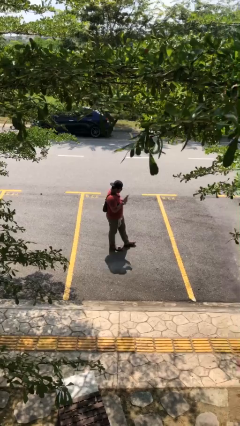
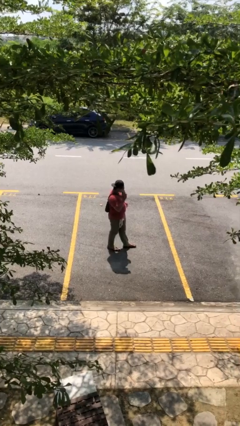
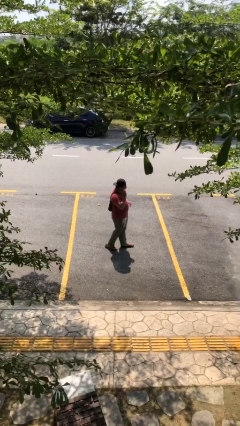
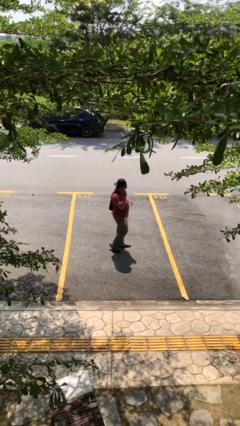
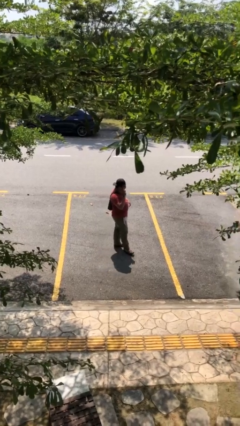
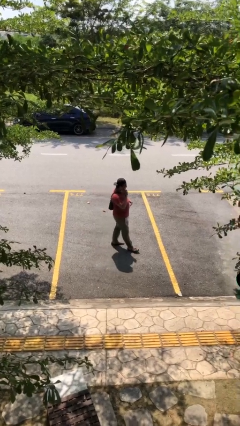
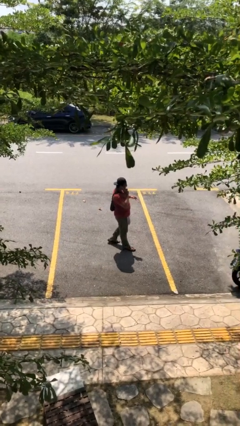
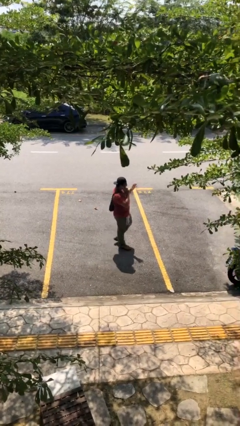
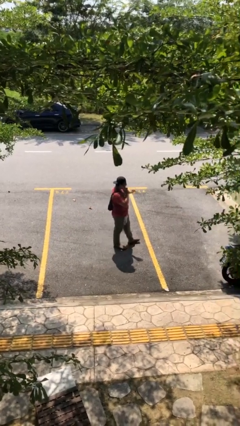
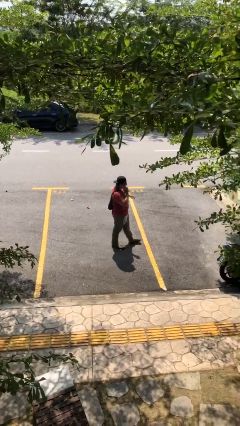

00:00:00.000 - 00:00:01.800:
person talks on phone

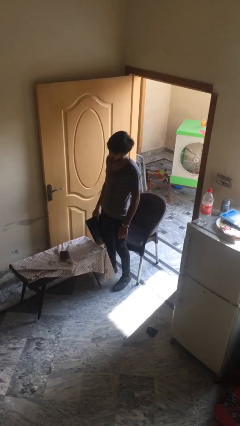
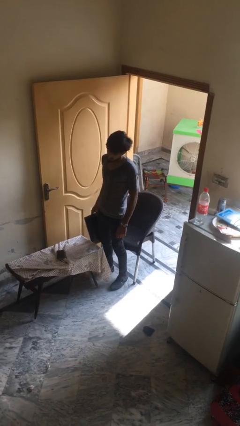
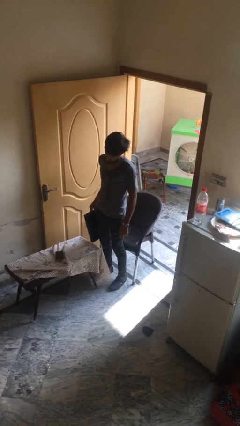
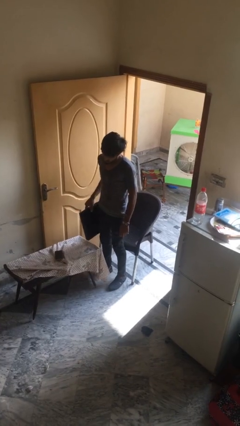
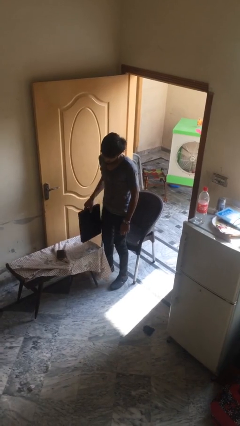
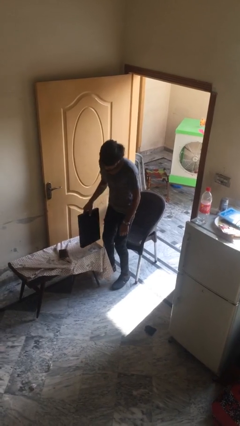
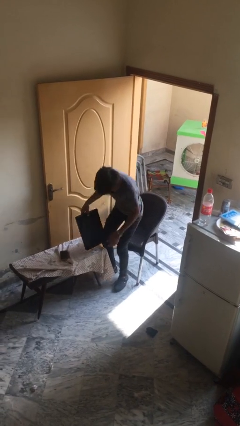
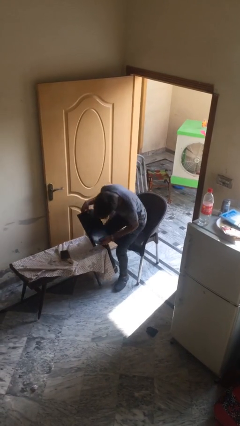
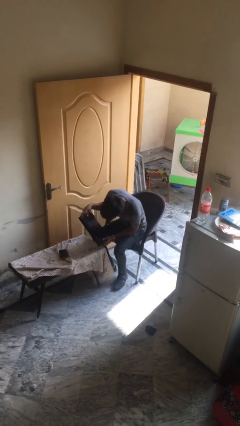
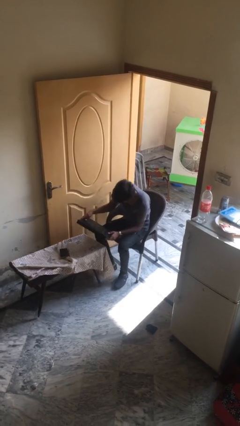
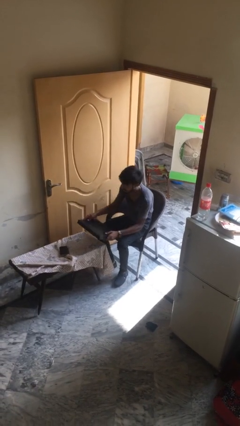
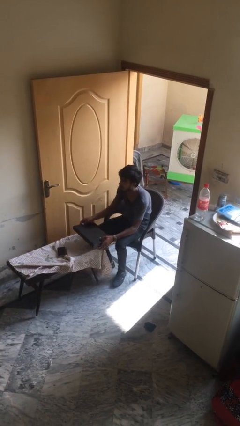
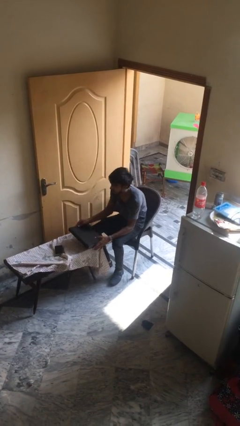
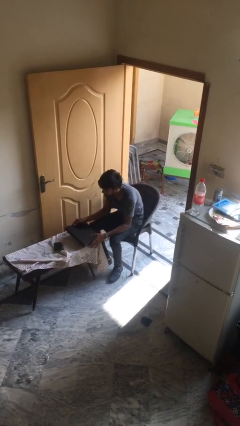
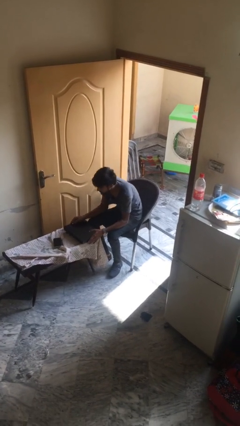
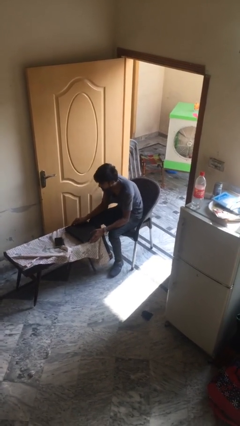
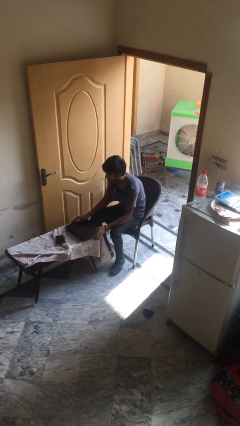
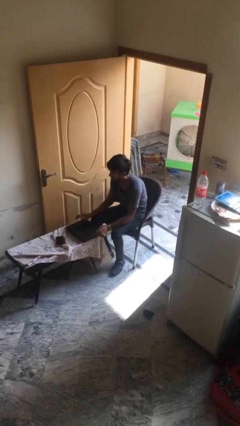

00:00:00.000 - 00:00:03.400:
person sits down

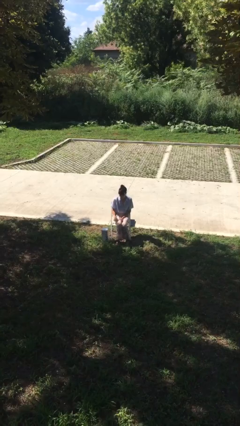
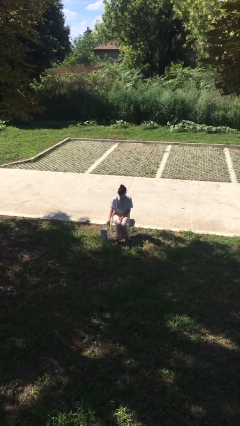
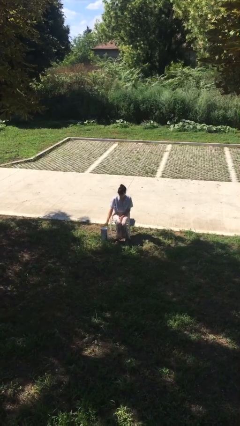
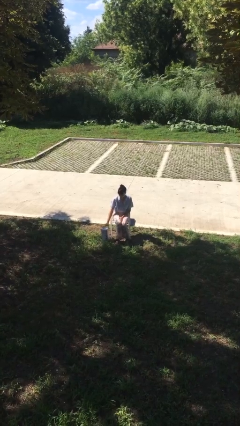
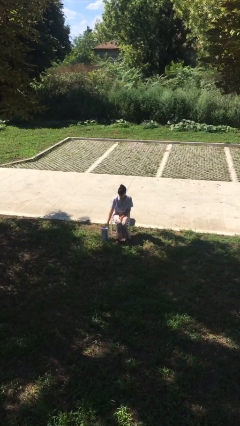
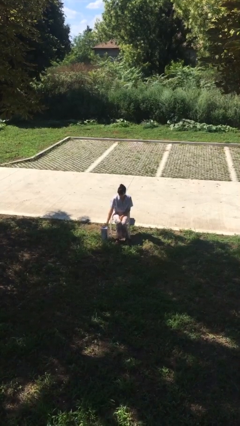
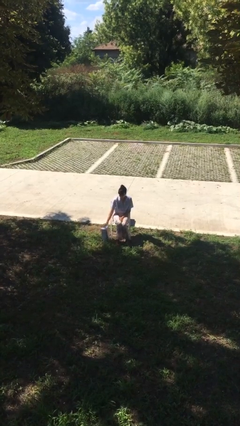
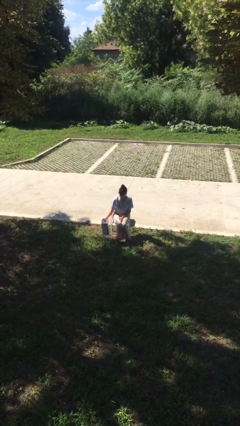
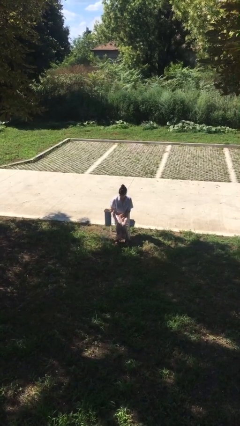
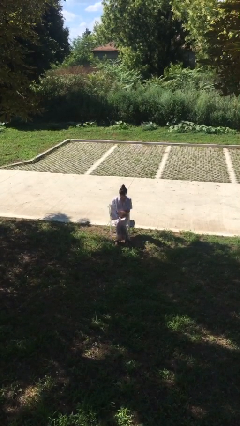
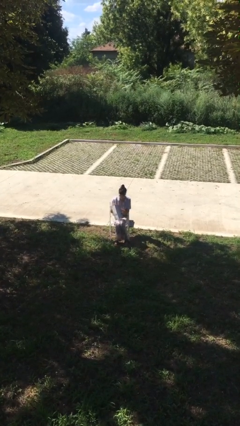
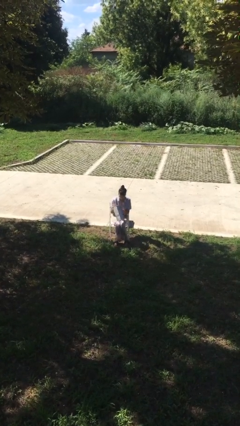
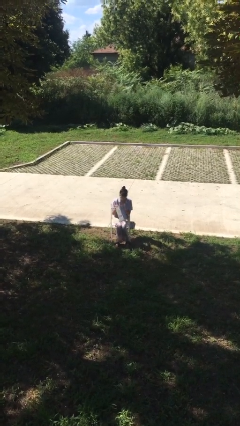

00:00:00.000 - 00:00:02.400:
person picks up object from floor

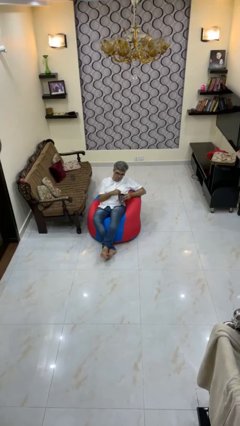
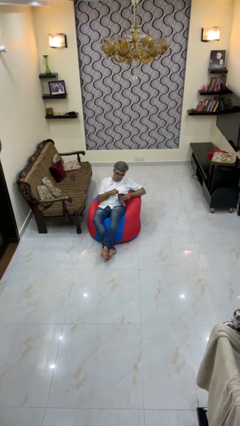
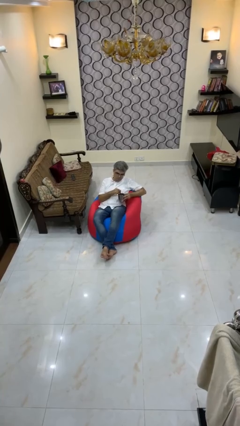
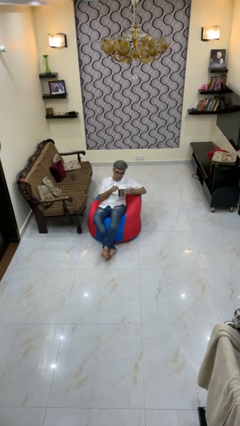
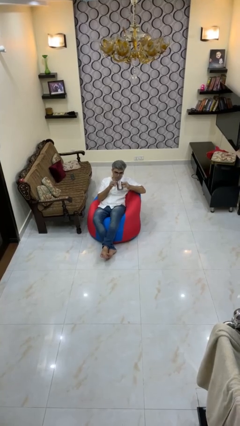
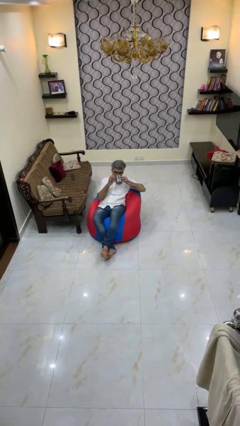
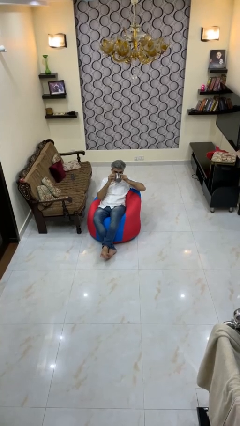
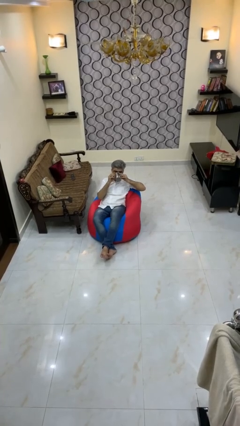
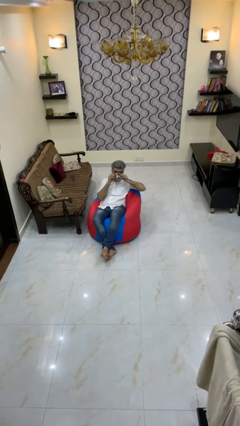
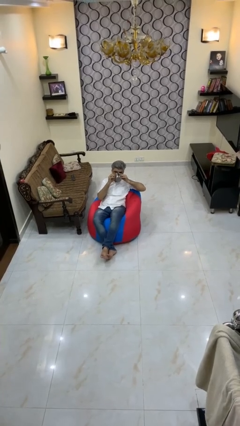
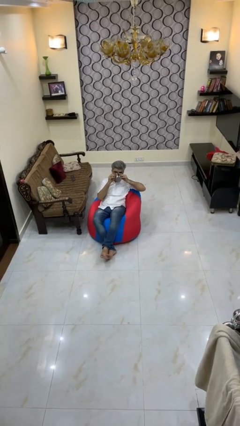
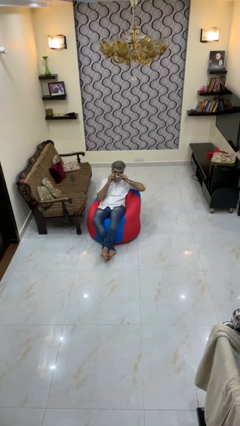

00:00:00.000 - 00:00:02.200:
person drinks from mug

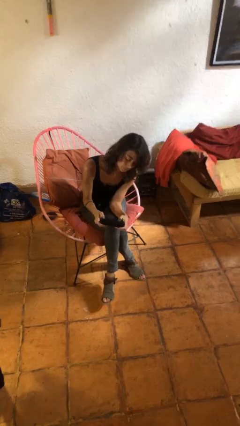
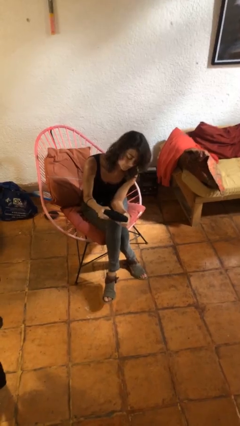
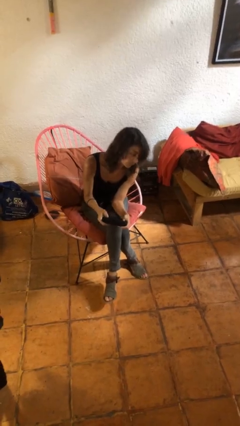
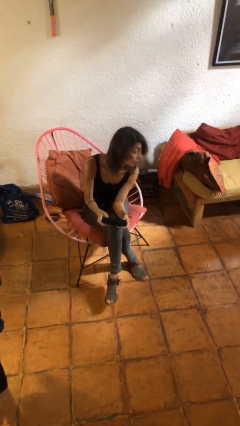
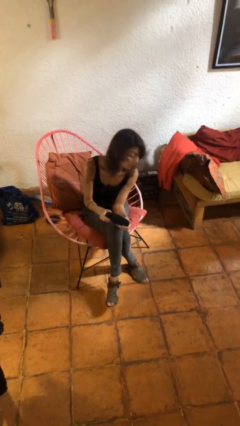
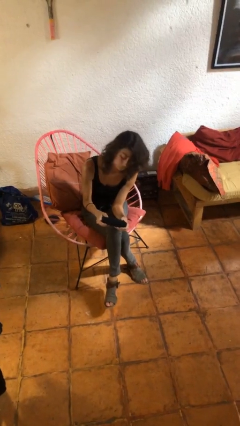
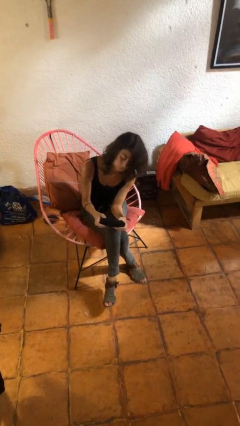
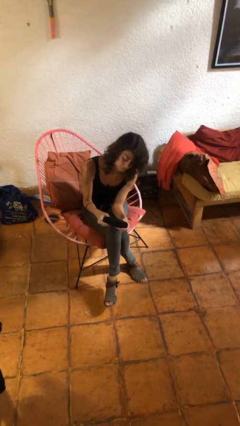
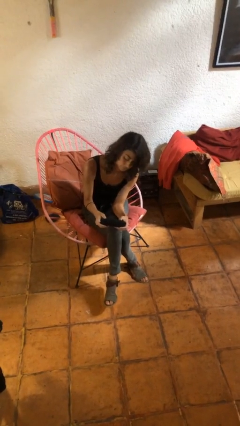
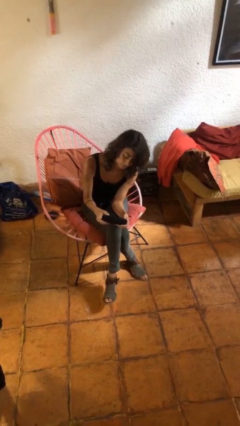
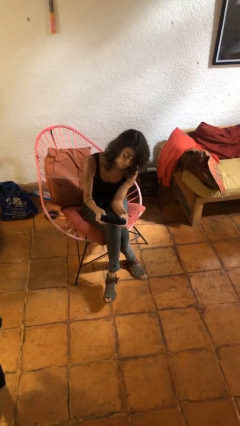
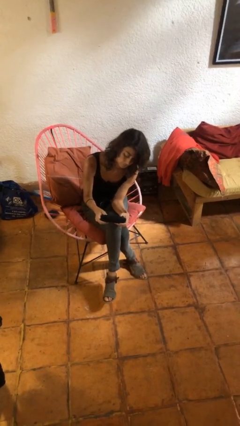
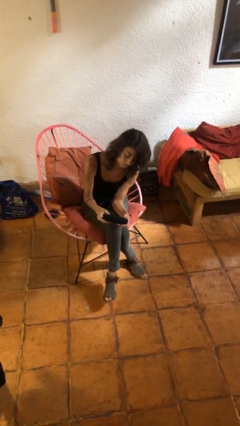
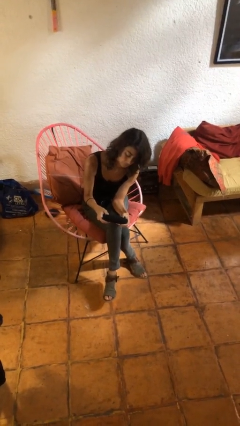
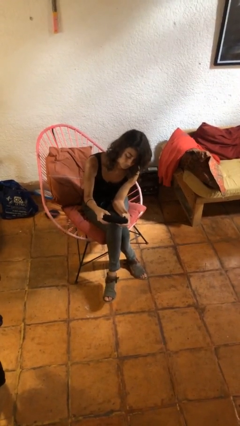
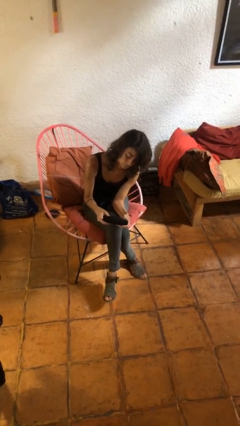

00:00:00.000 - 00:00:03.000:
person interacts with handheld game

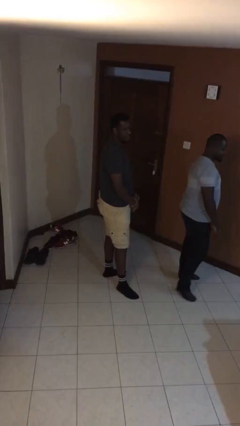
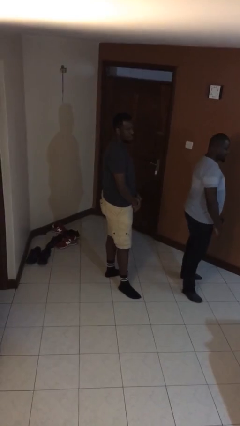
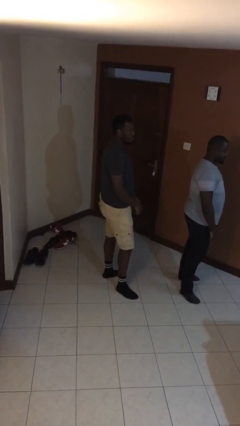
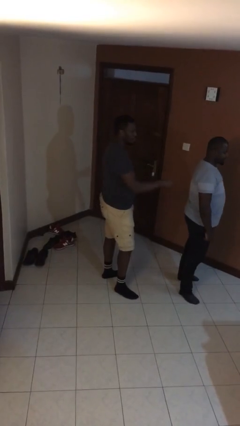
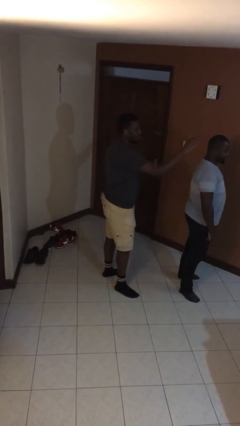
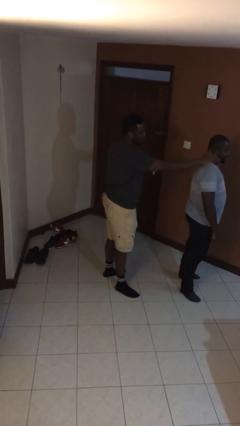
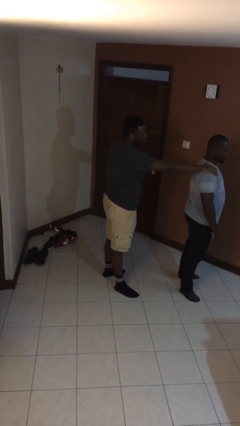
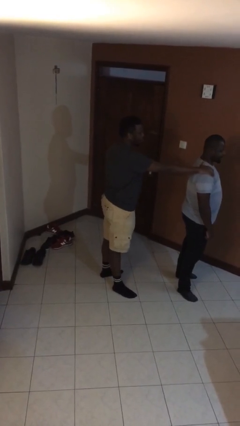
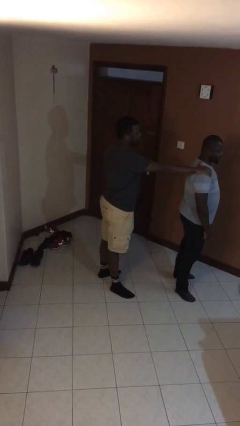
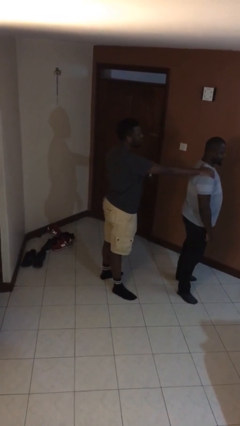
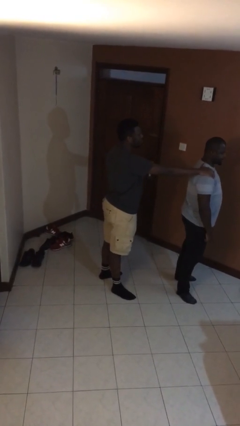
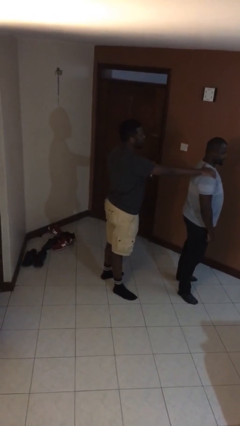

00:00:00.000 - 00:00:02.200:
person grabs person by shoulder

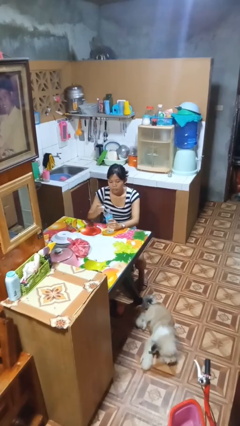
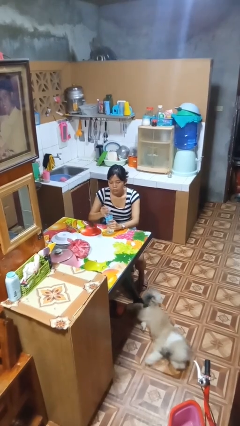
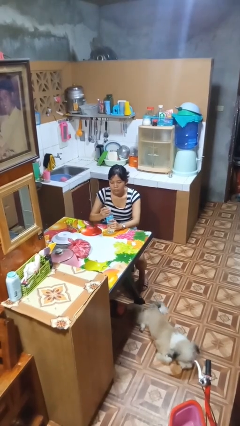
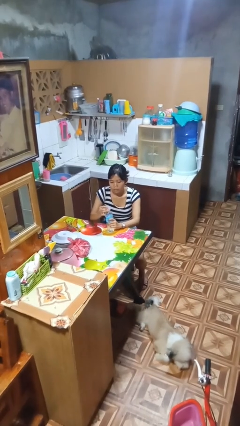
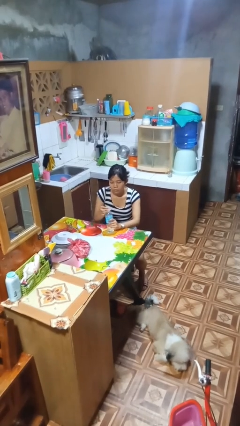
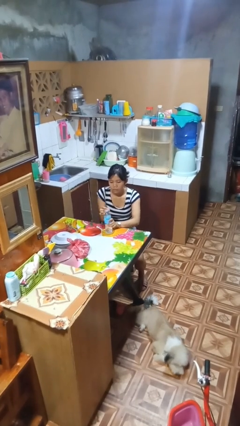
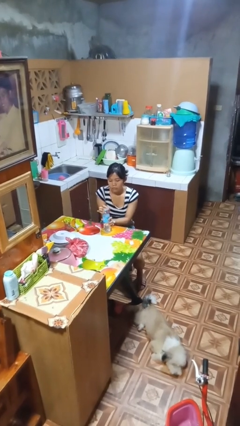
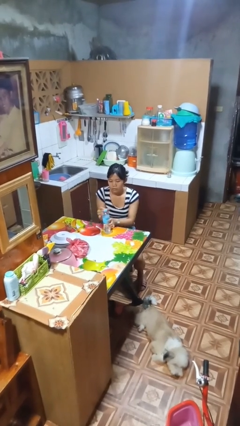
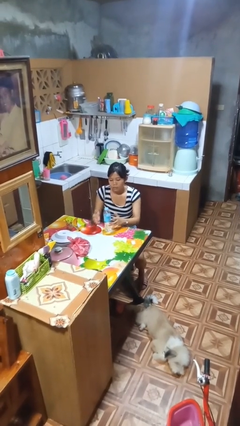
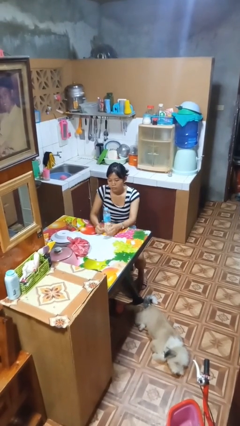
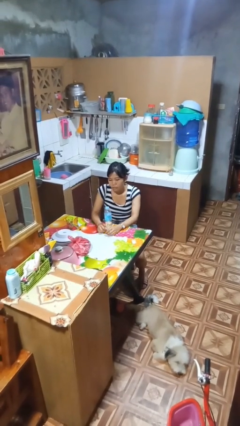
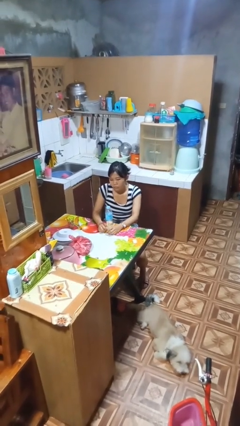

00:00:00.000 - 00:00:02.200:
person screws lid to bottle
